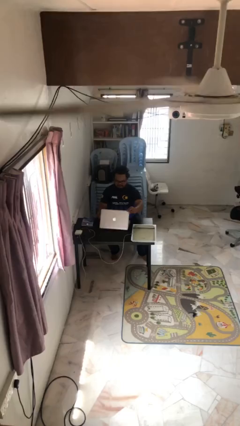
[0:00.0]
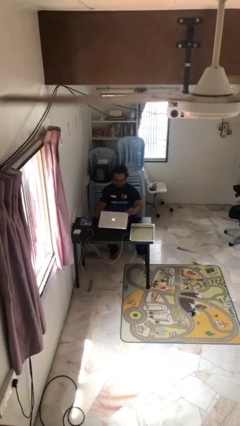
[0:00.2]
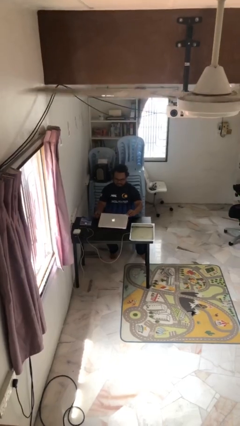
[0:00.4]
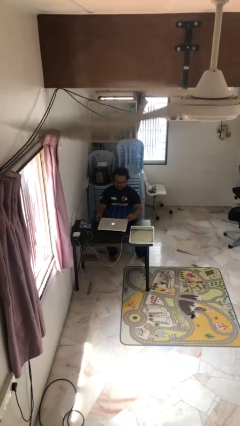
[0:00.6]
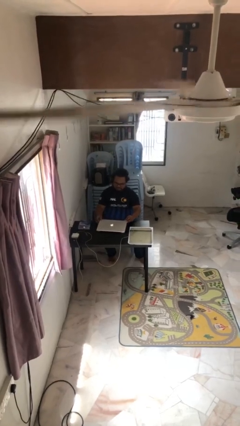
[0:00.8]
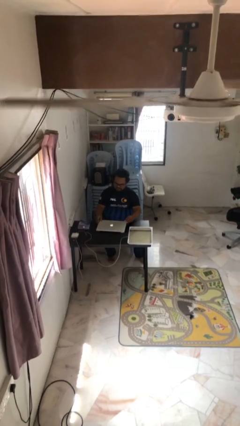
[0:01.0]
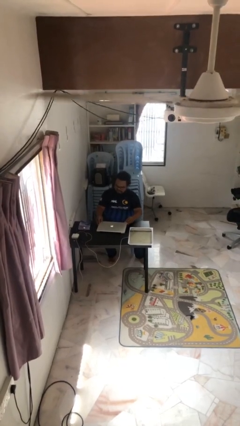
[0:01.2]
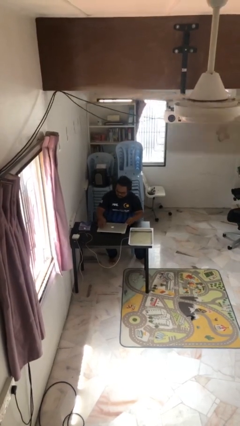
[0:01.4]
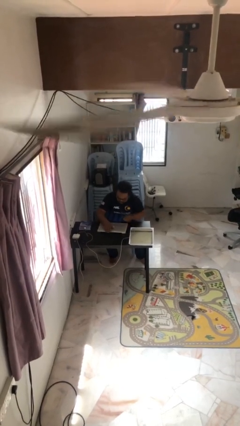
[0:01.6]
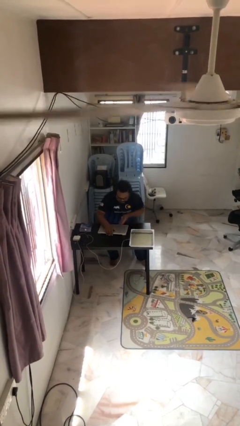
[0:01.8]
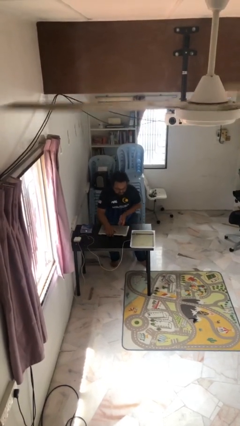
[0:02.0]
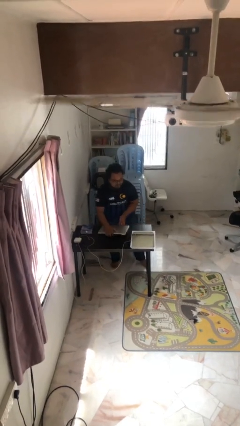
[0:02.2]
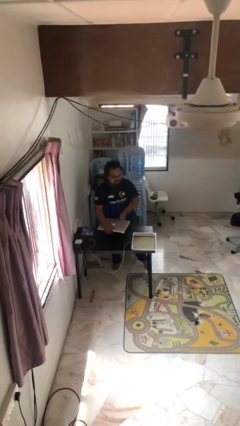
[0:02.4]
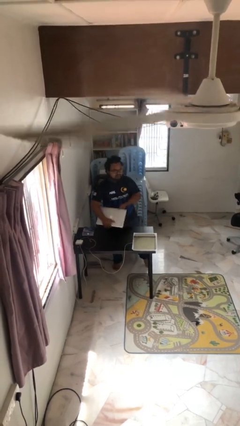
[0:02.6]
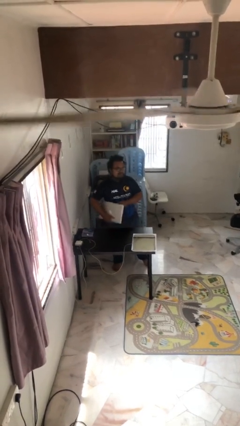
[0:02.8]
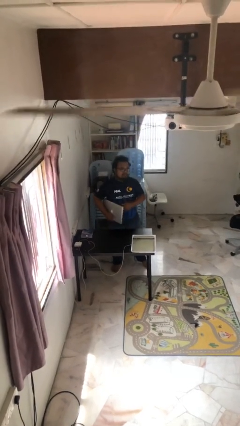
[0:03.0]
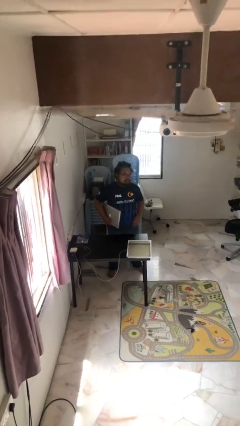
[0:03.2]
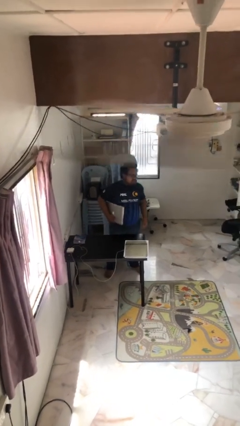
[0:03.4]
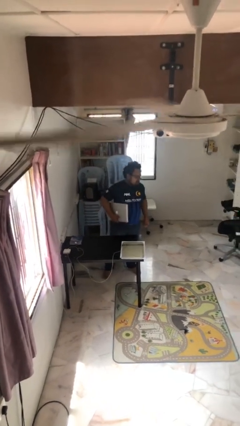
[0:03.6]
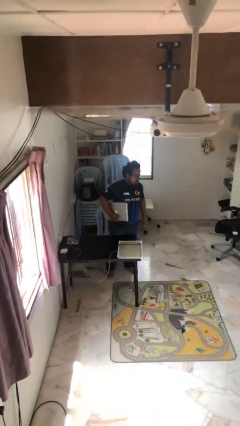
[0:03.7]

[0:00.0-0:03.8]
person stands up

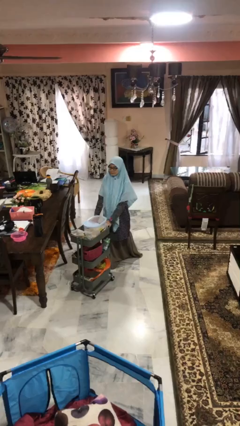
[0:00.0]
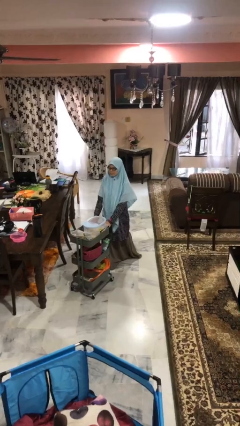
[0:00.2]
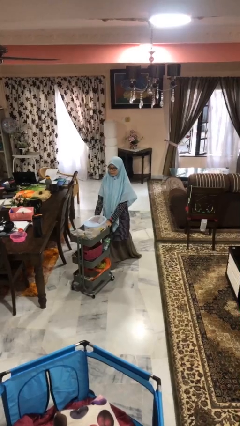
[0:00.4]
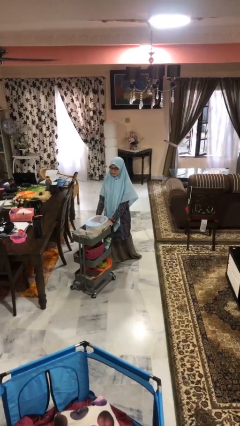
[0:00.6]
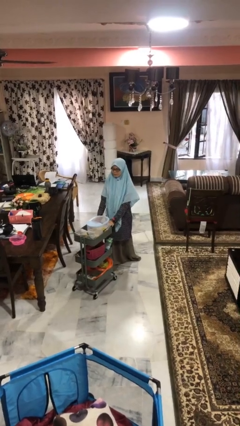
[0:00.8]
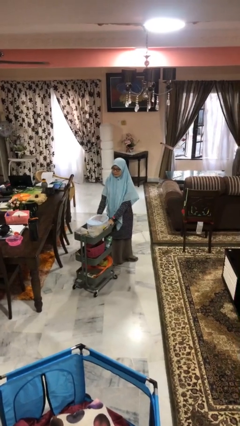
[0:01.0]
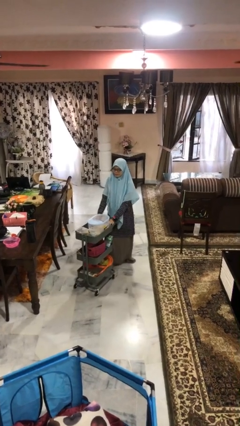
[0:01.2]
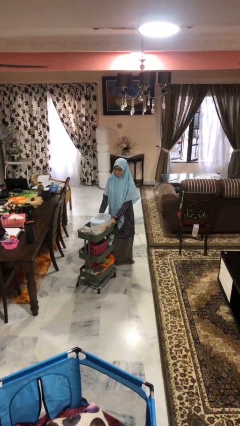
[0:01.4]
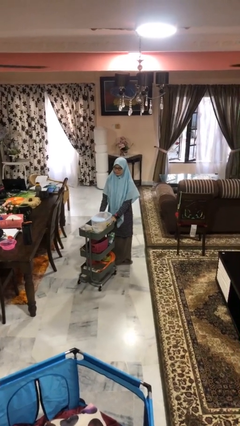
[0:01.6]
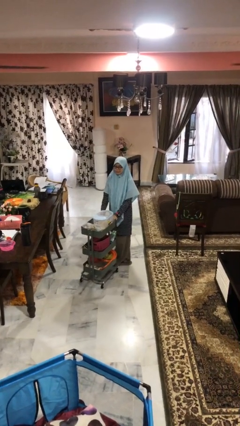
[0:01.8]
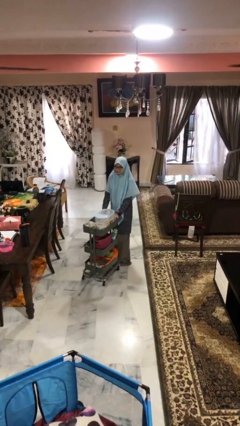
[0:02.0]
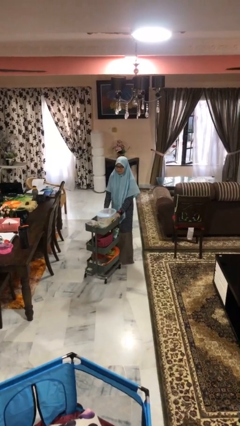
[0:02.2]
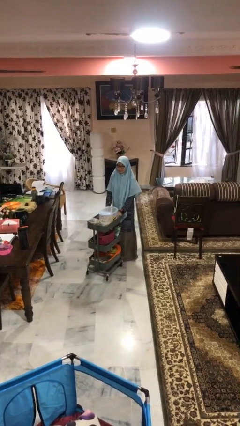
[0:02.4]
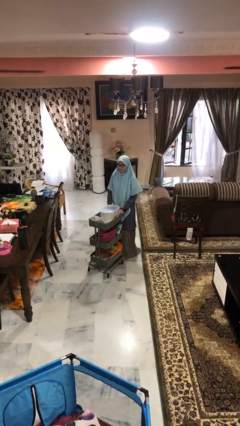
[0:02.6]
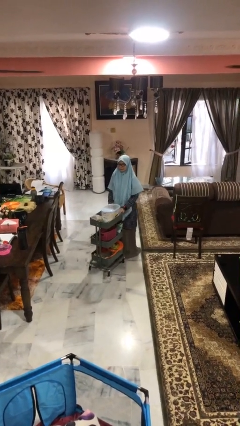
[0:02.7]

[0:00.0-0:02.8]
person pulls wheeled cart

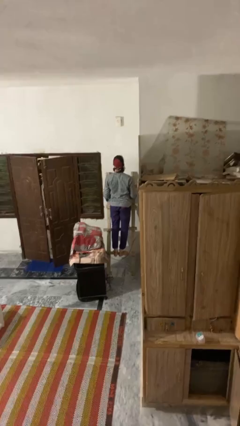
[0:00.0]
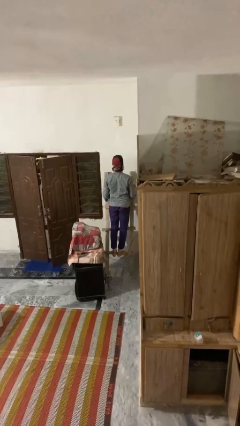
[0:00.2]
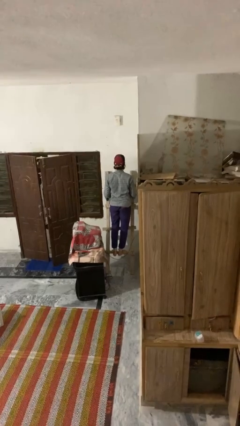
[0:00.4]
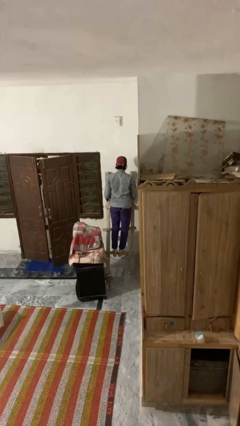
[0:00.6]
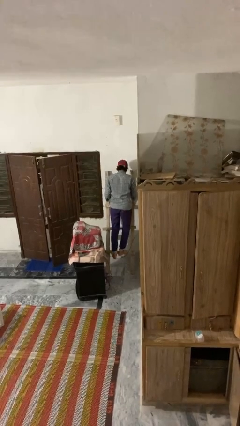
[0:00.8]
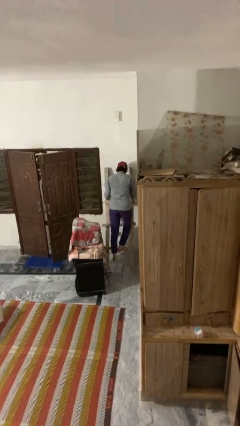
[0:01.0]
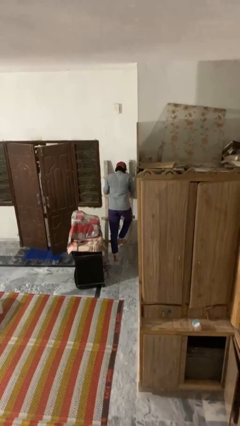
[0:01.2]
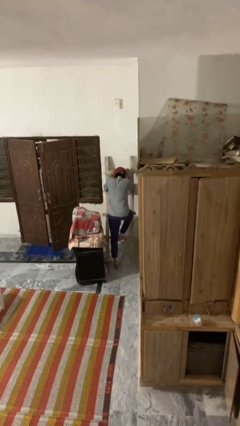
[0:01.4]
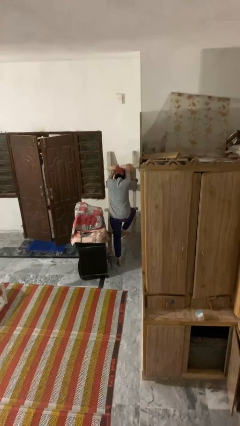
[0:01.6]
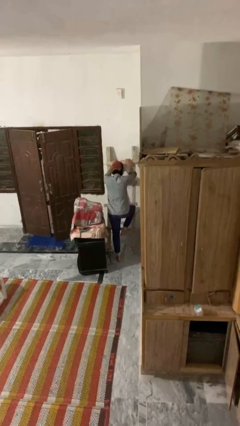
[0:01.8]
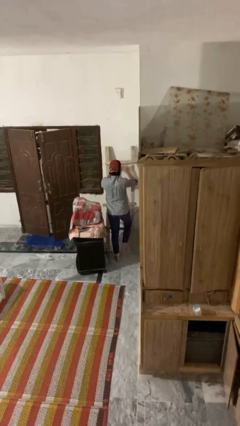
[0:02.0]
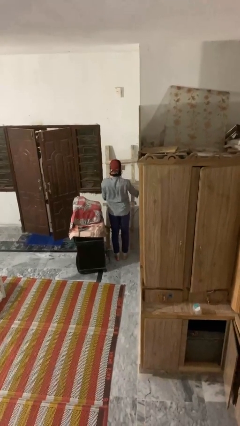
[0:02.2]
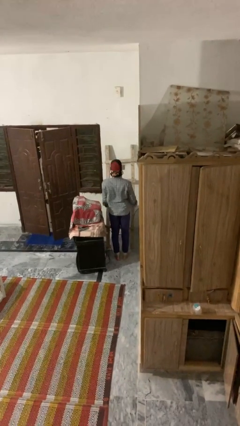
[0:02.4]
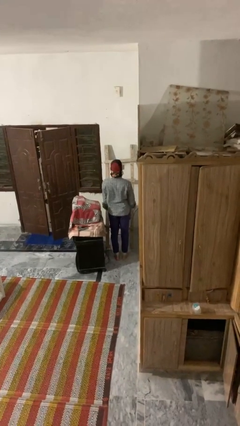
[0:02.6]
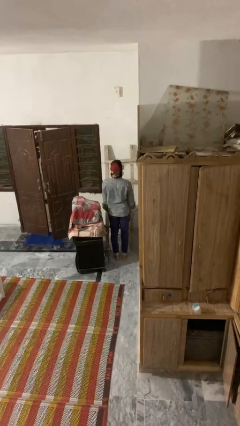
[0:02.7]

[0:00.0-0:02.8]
person climbs down ladder

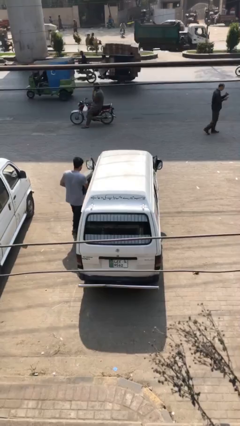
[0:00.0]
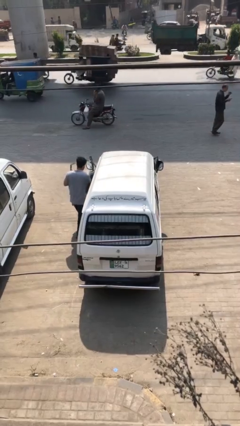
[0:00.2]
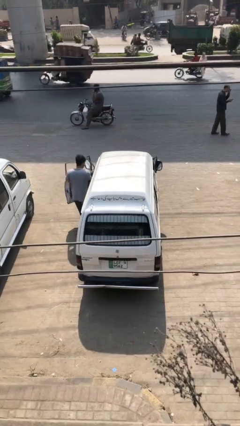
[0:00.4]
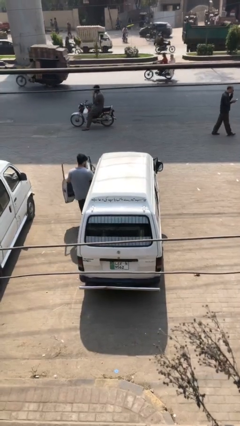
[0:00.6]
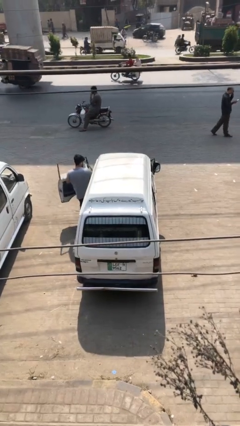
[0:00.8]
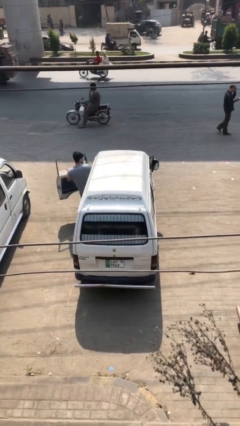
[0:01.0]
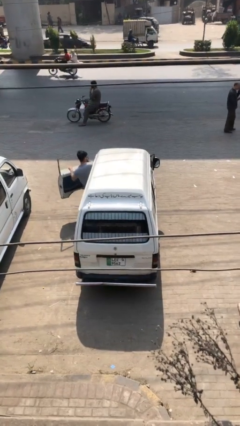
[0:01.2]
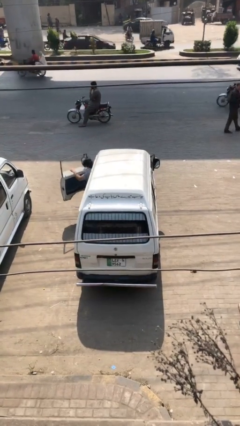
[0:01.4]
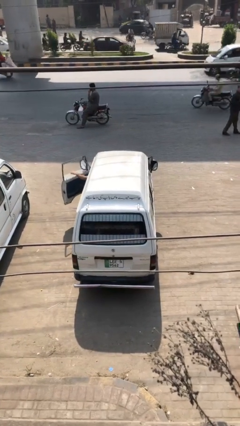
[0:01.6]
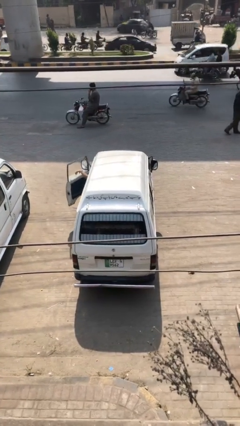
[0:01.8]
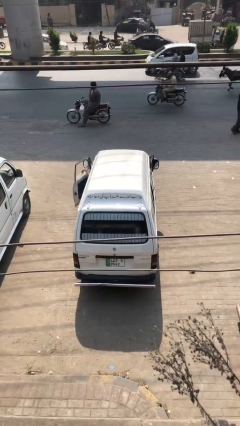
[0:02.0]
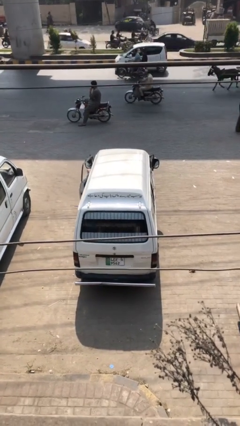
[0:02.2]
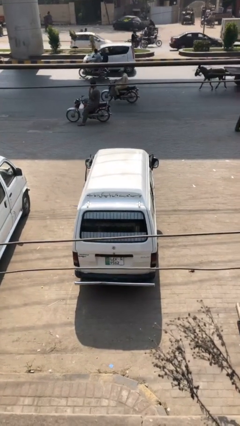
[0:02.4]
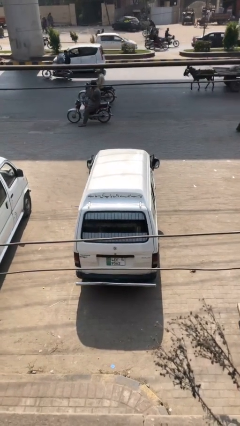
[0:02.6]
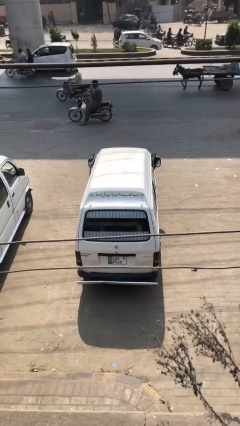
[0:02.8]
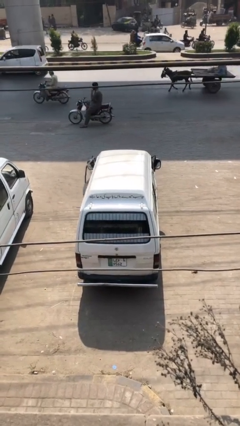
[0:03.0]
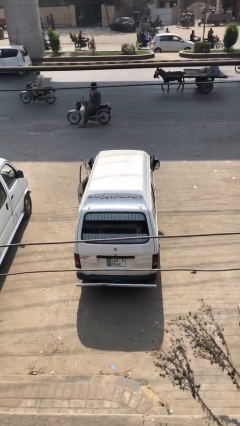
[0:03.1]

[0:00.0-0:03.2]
car picks up person

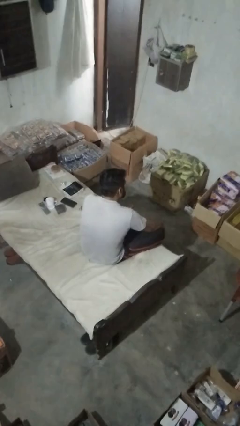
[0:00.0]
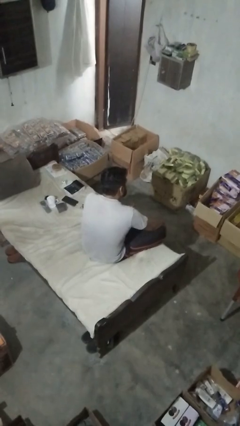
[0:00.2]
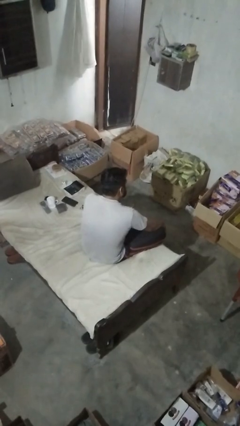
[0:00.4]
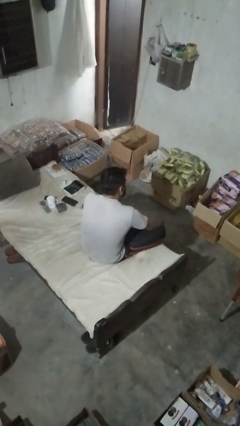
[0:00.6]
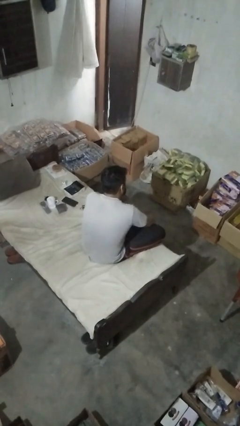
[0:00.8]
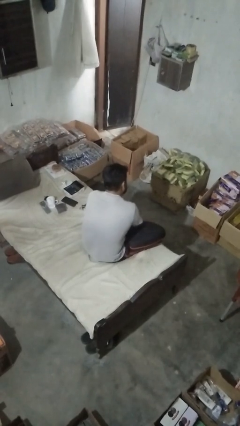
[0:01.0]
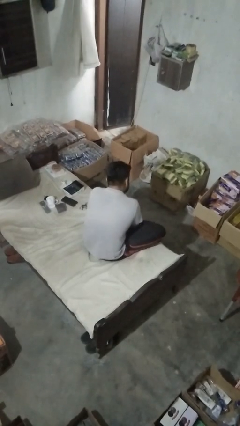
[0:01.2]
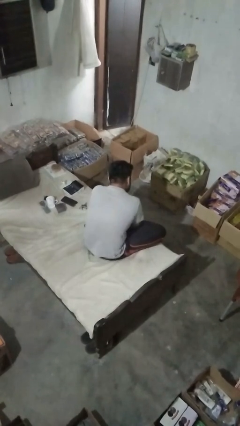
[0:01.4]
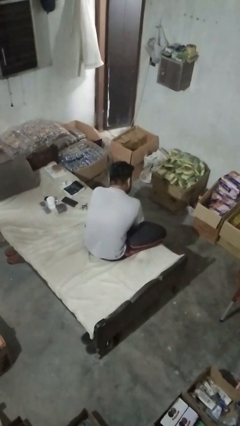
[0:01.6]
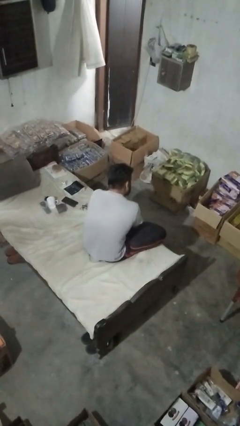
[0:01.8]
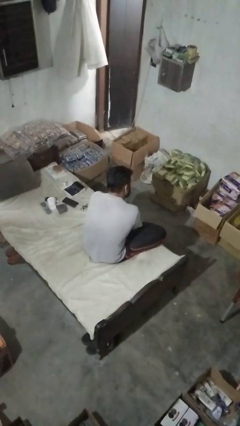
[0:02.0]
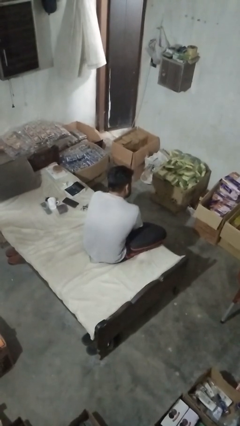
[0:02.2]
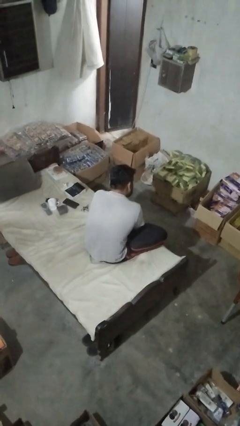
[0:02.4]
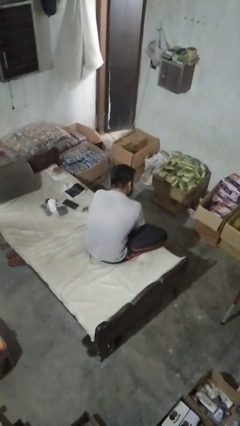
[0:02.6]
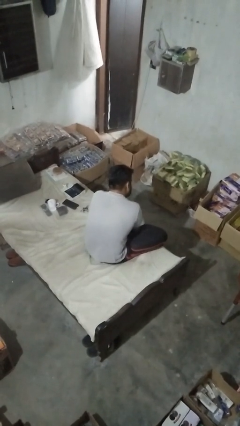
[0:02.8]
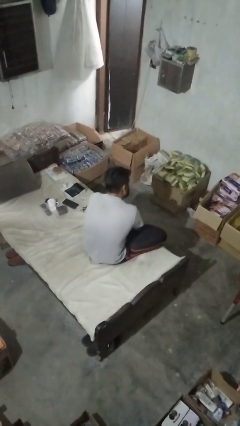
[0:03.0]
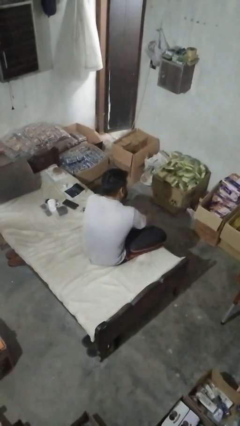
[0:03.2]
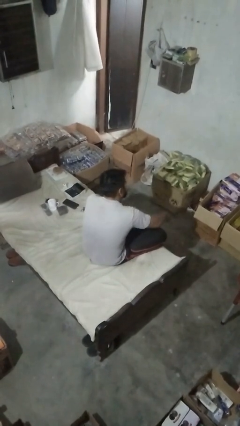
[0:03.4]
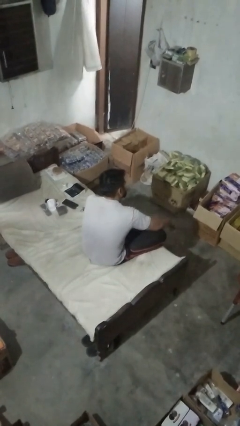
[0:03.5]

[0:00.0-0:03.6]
person rubs foot

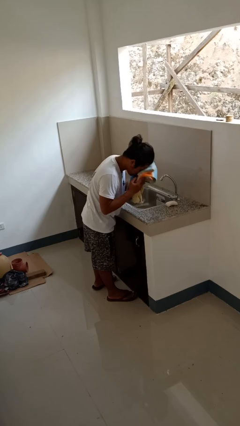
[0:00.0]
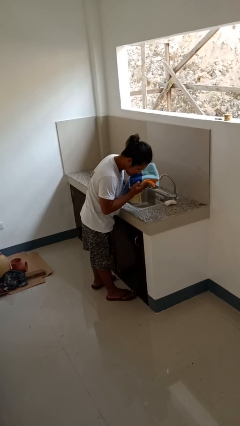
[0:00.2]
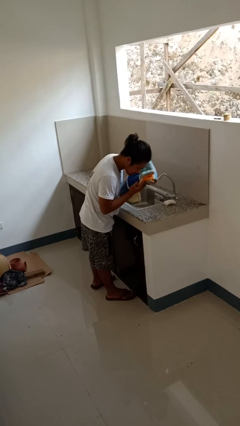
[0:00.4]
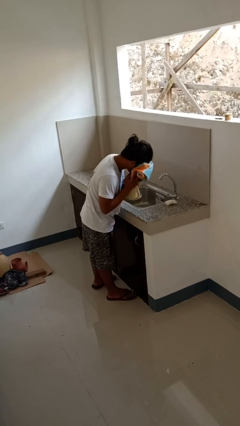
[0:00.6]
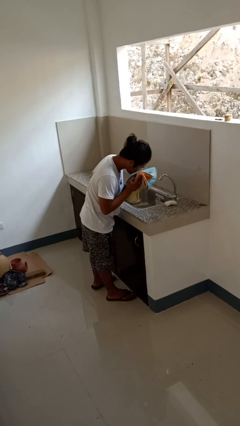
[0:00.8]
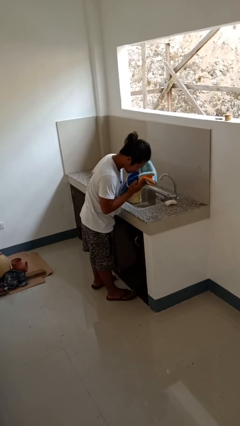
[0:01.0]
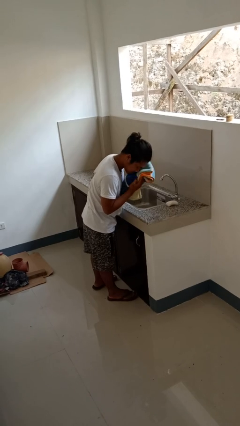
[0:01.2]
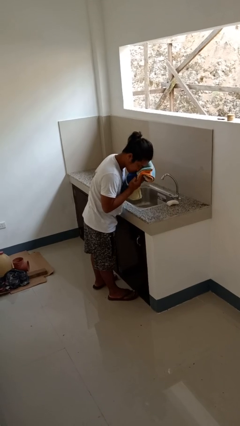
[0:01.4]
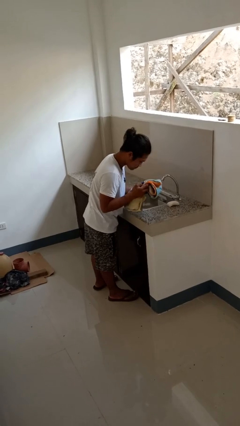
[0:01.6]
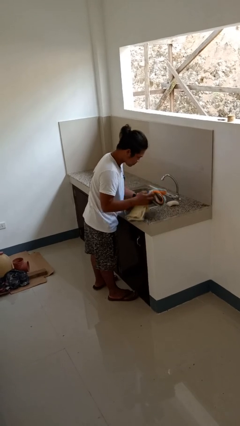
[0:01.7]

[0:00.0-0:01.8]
person dries face with towel
